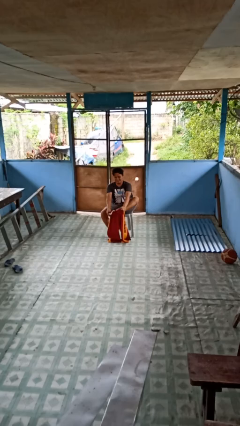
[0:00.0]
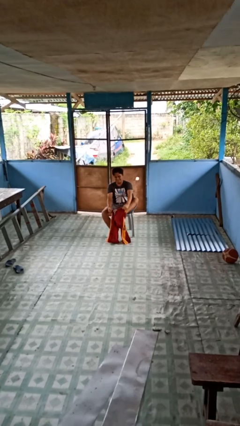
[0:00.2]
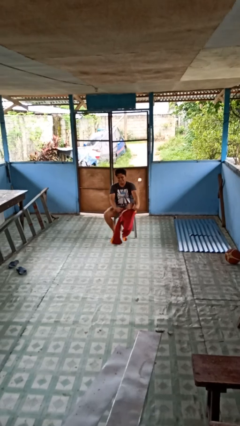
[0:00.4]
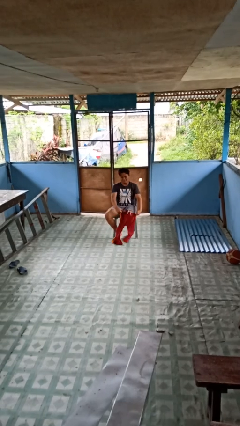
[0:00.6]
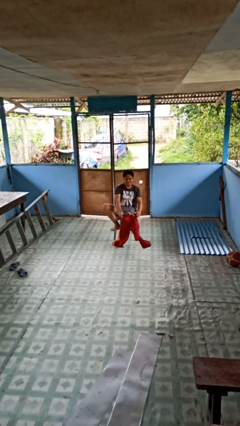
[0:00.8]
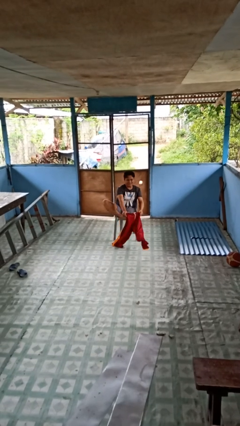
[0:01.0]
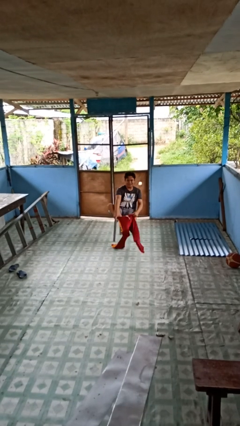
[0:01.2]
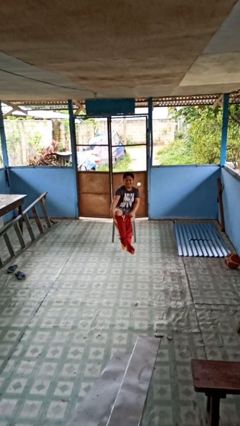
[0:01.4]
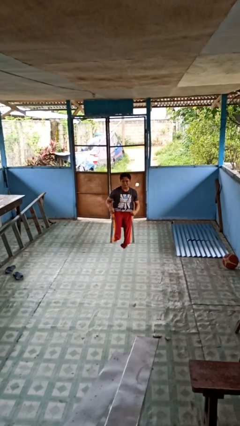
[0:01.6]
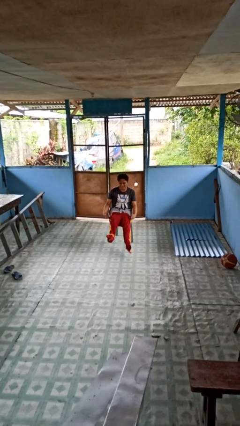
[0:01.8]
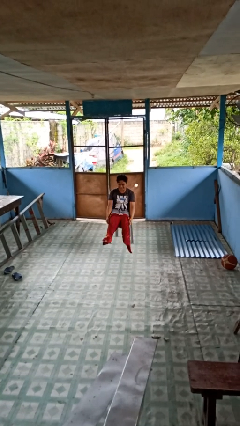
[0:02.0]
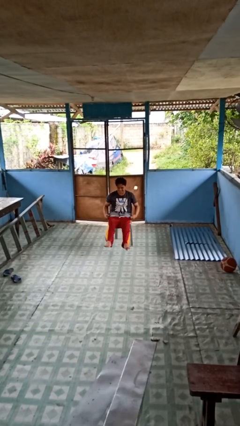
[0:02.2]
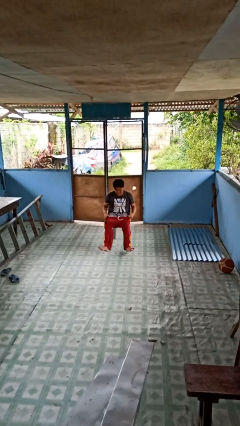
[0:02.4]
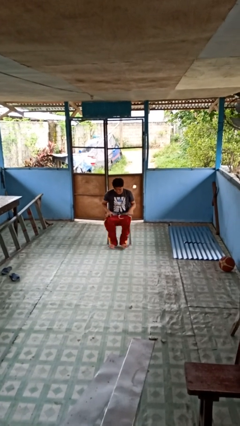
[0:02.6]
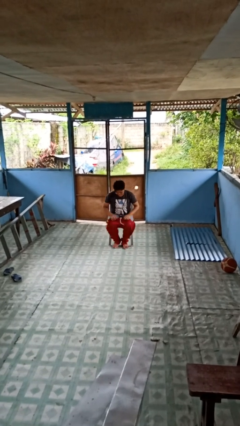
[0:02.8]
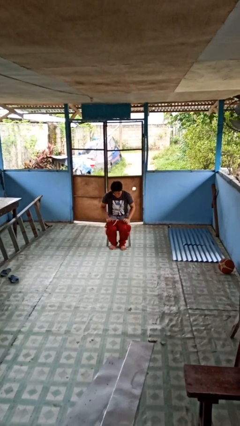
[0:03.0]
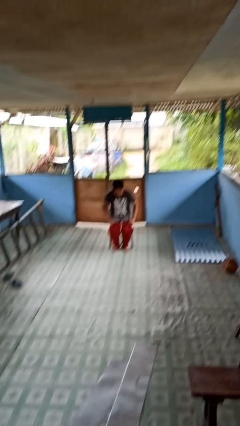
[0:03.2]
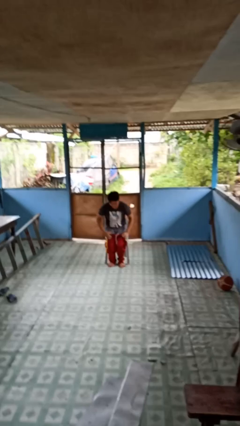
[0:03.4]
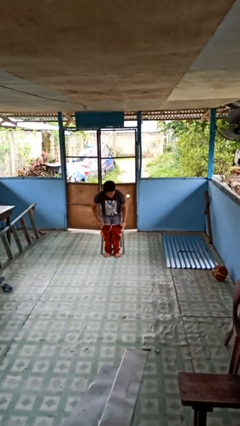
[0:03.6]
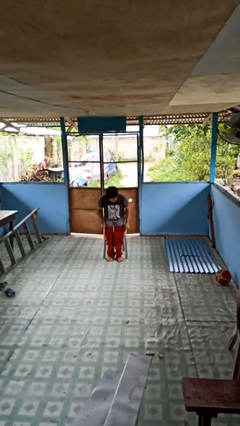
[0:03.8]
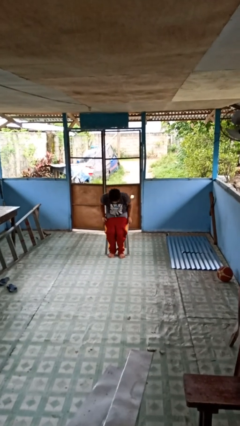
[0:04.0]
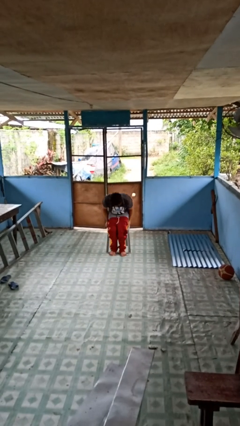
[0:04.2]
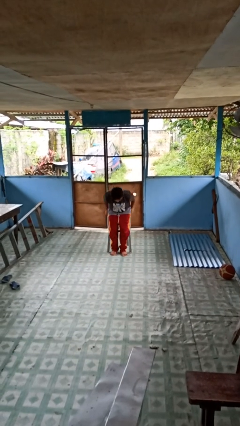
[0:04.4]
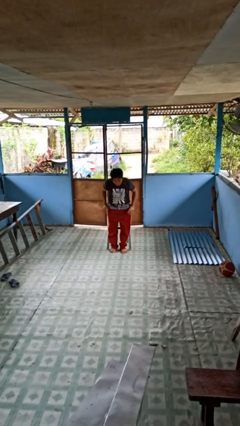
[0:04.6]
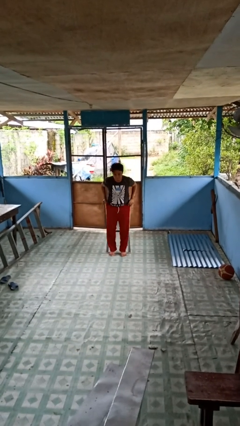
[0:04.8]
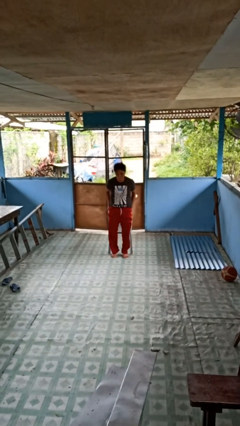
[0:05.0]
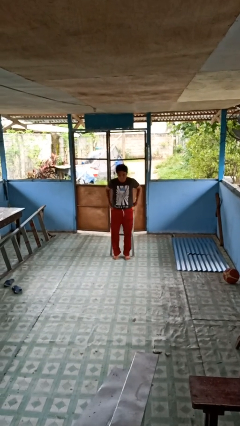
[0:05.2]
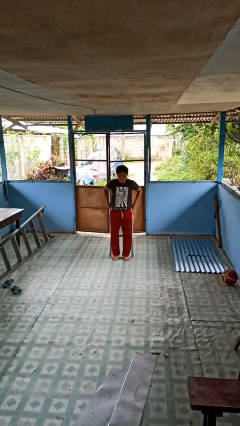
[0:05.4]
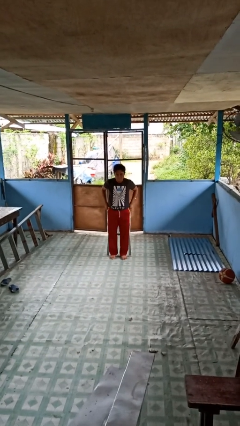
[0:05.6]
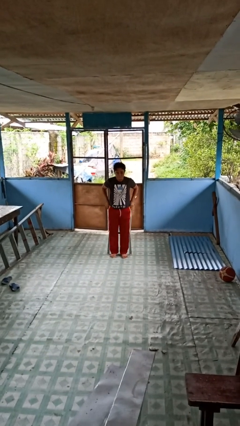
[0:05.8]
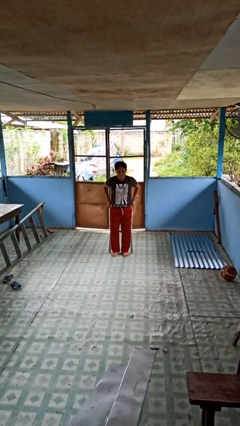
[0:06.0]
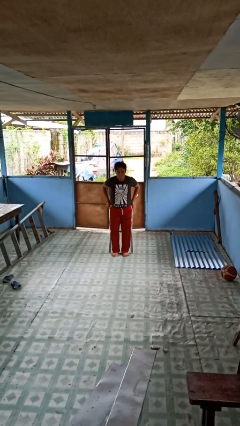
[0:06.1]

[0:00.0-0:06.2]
person puts on pants

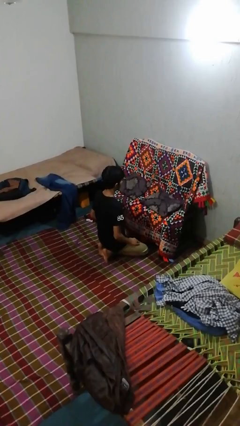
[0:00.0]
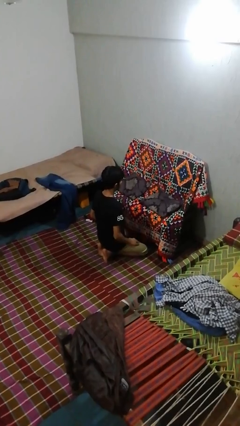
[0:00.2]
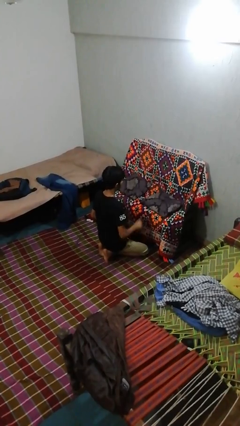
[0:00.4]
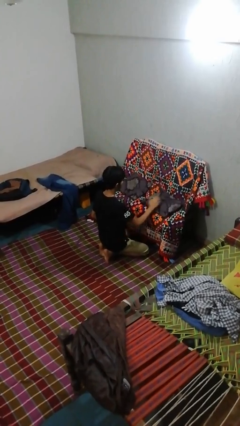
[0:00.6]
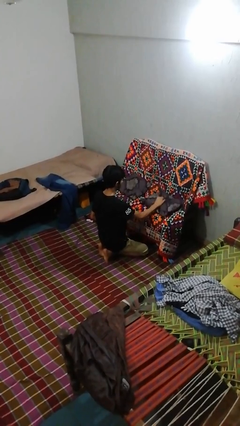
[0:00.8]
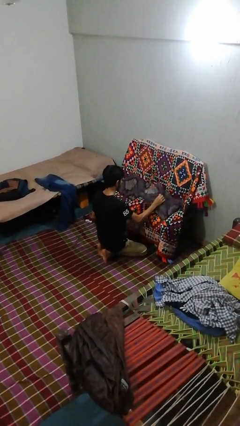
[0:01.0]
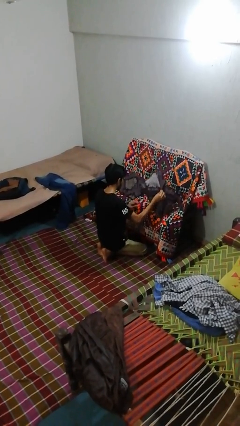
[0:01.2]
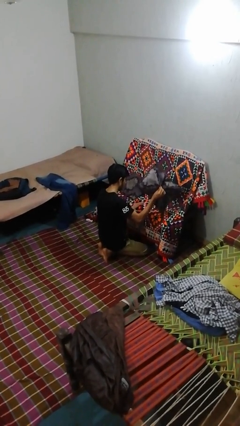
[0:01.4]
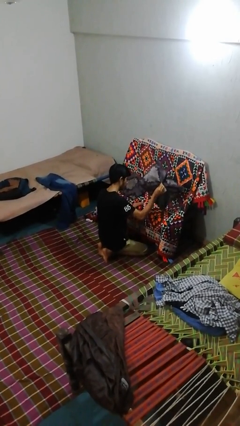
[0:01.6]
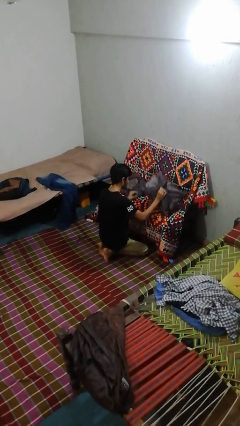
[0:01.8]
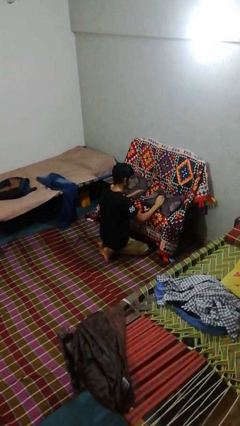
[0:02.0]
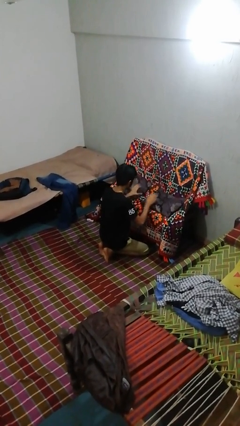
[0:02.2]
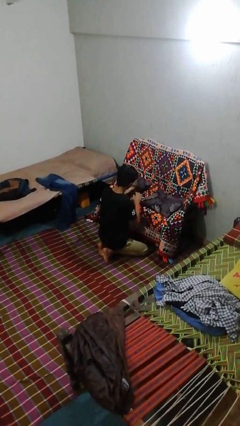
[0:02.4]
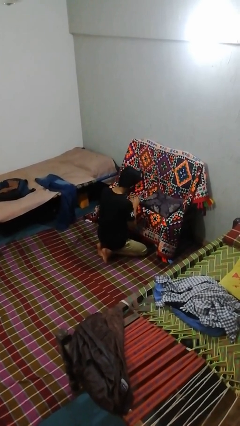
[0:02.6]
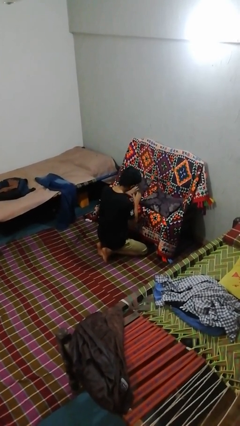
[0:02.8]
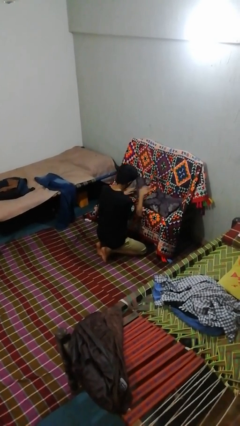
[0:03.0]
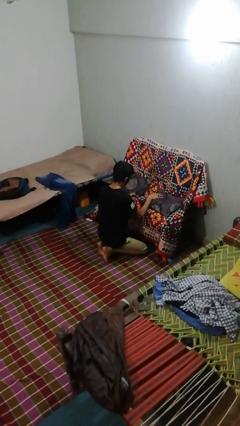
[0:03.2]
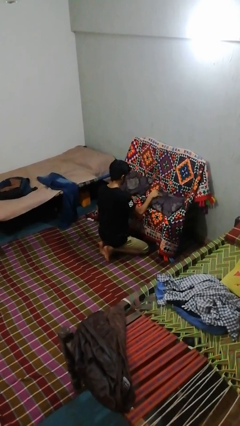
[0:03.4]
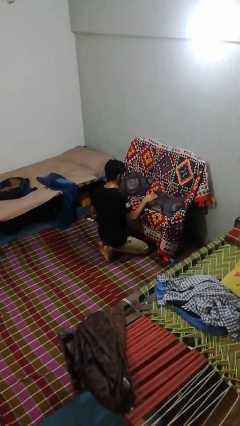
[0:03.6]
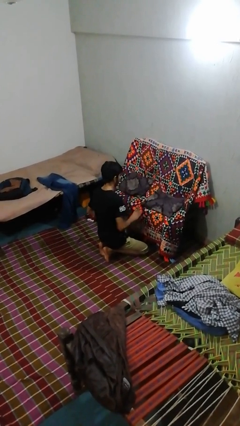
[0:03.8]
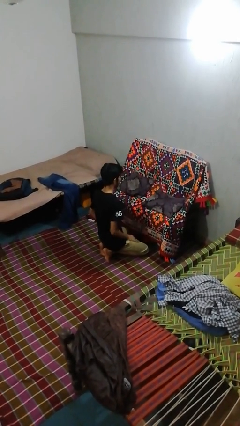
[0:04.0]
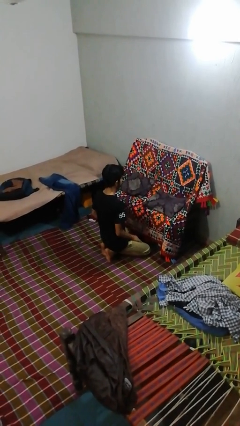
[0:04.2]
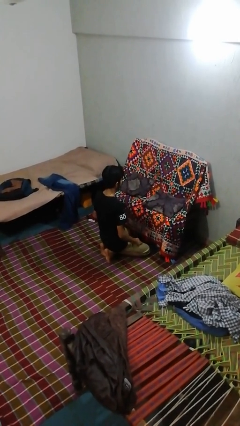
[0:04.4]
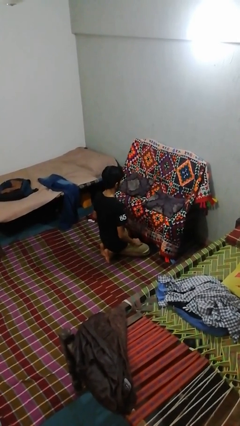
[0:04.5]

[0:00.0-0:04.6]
person searches in couch

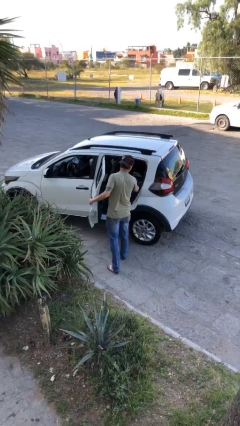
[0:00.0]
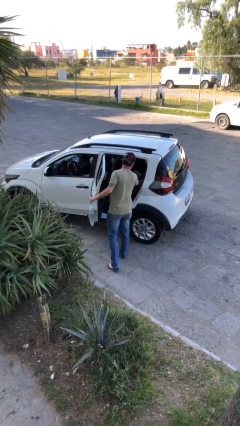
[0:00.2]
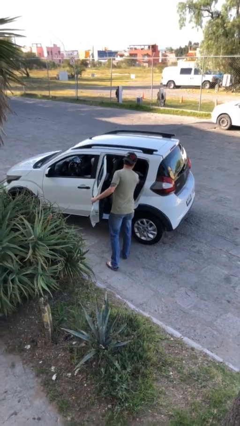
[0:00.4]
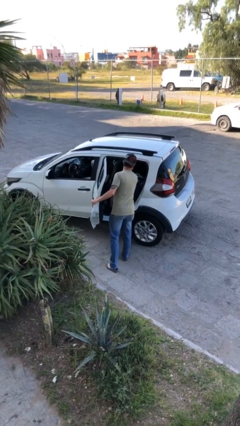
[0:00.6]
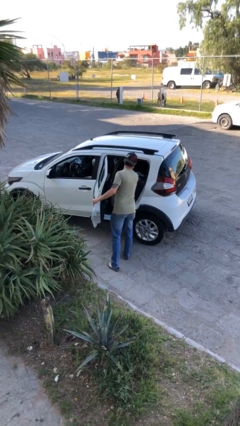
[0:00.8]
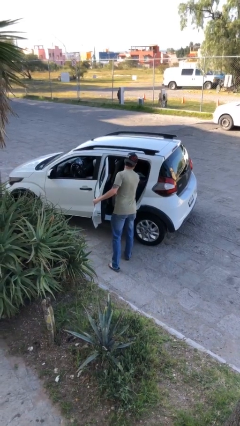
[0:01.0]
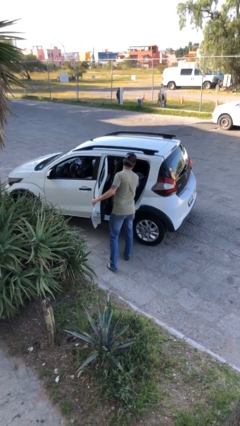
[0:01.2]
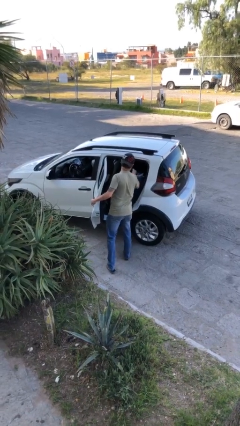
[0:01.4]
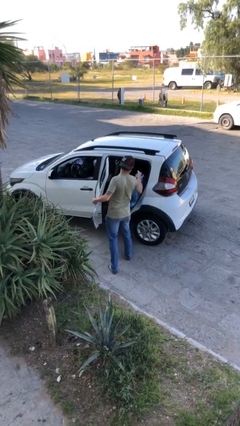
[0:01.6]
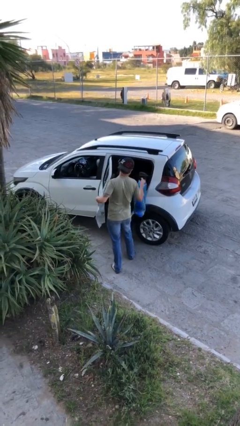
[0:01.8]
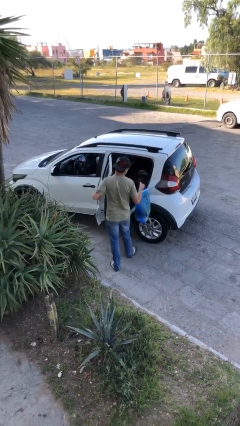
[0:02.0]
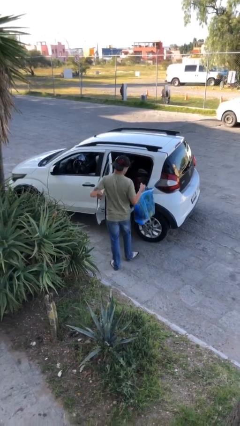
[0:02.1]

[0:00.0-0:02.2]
person unloads car

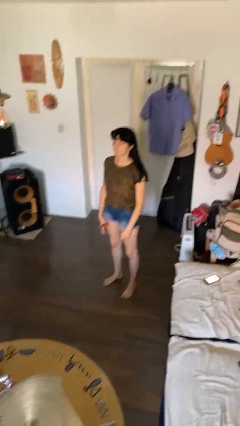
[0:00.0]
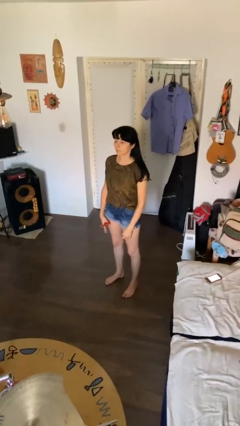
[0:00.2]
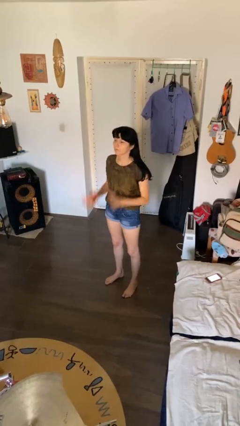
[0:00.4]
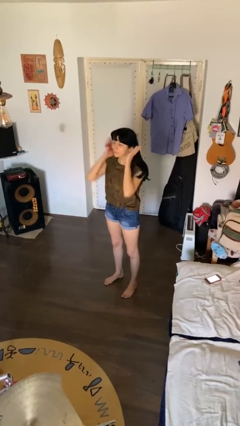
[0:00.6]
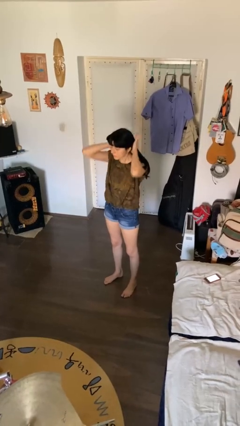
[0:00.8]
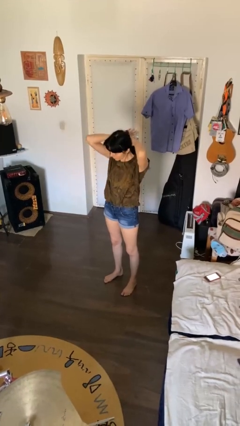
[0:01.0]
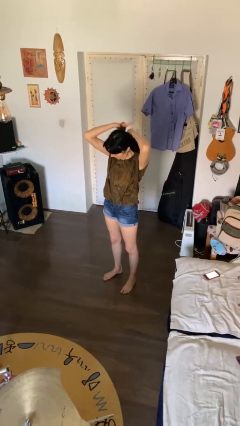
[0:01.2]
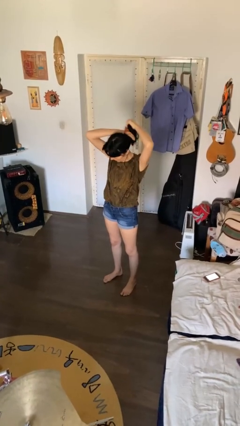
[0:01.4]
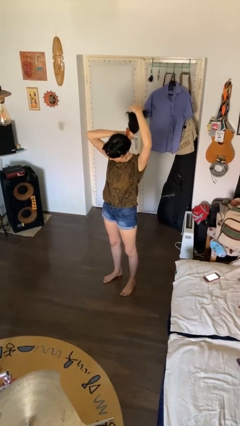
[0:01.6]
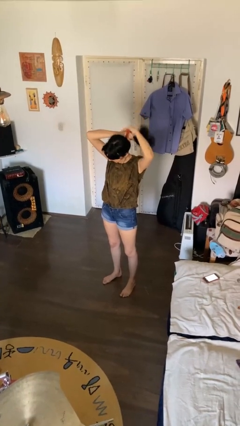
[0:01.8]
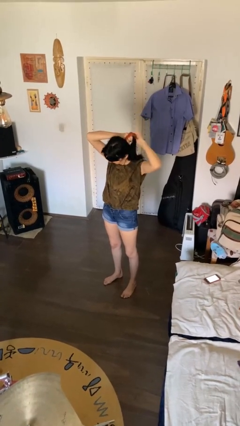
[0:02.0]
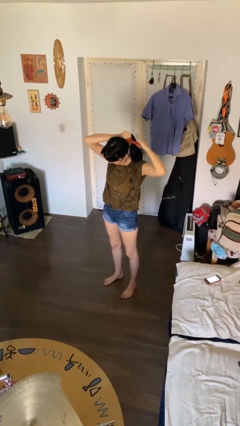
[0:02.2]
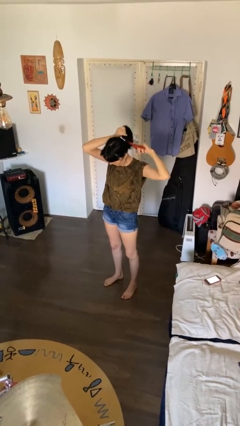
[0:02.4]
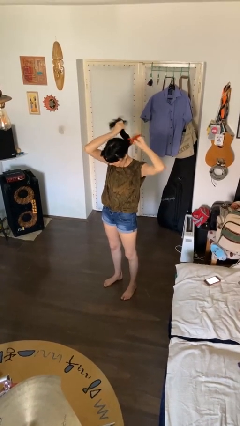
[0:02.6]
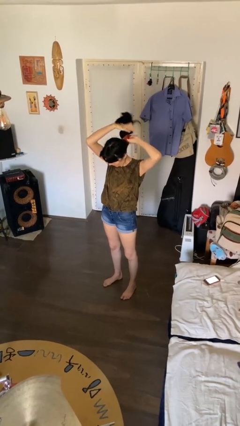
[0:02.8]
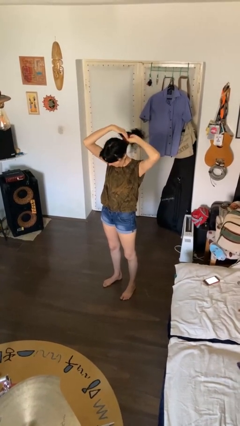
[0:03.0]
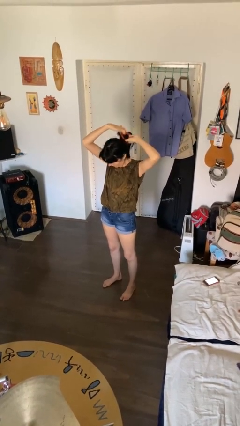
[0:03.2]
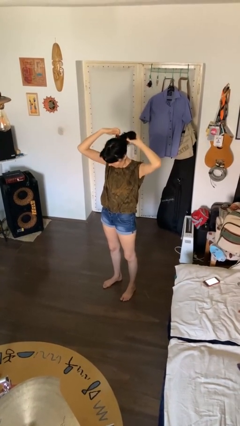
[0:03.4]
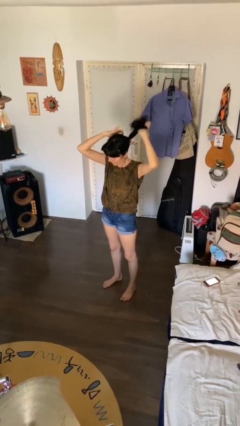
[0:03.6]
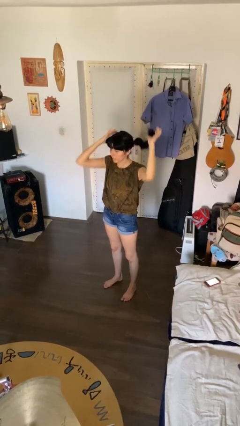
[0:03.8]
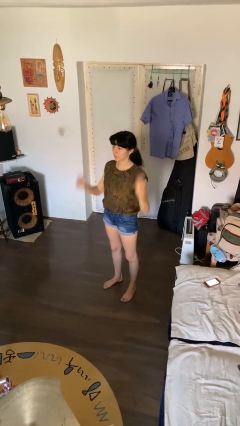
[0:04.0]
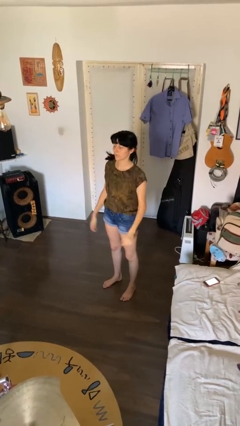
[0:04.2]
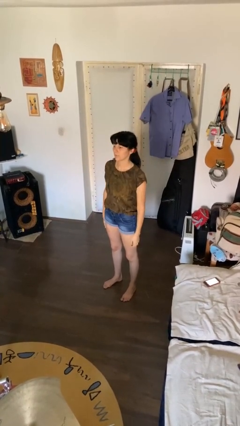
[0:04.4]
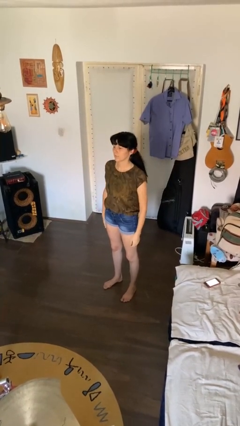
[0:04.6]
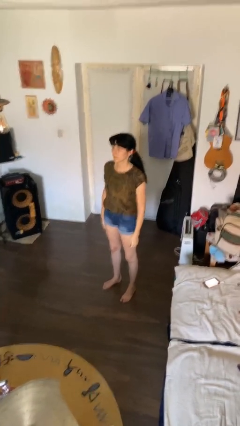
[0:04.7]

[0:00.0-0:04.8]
person puts hair in ponytail

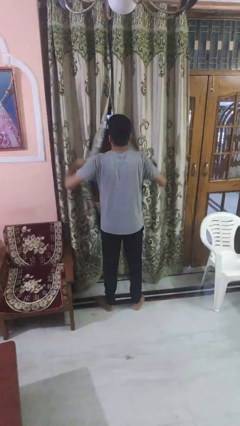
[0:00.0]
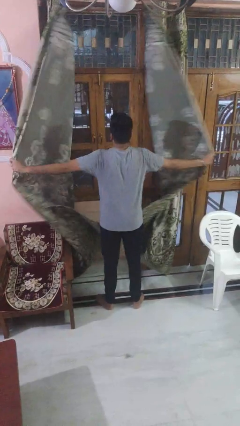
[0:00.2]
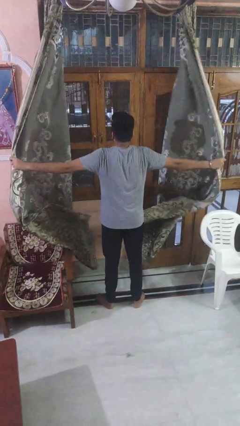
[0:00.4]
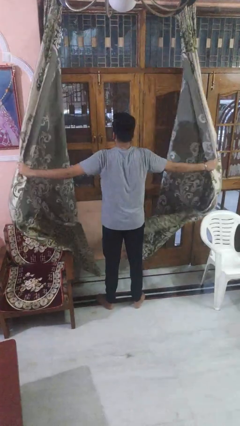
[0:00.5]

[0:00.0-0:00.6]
person opens curtains
